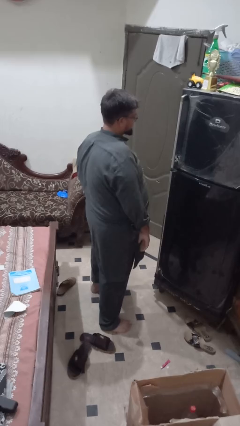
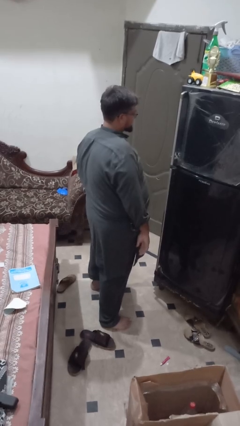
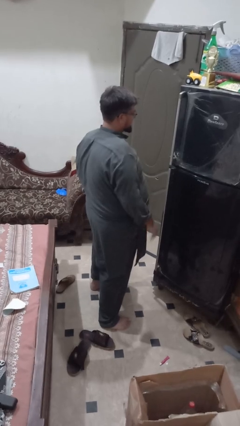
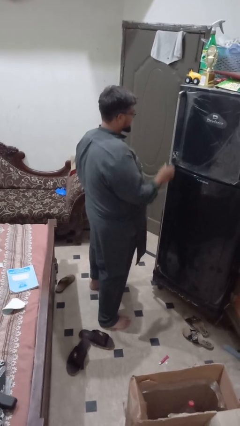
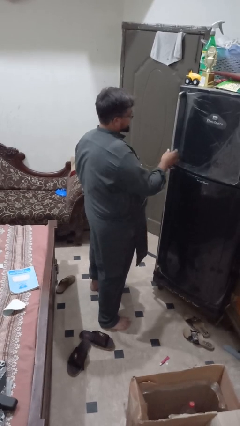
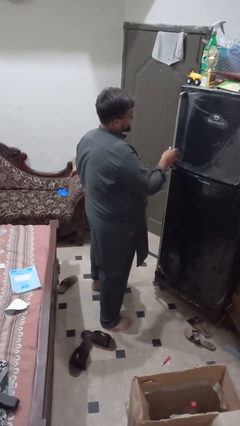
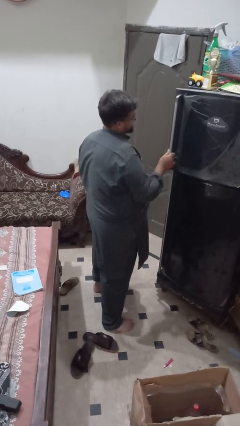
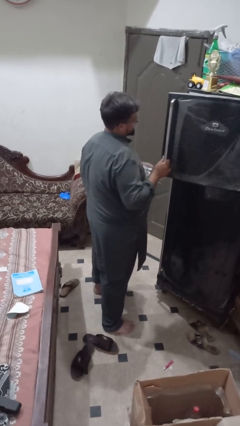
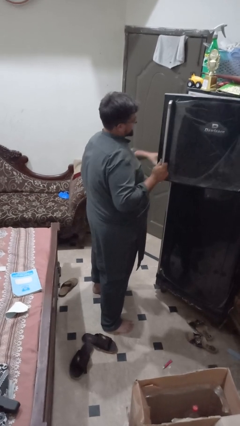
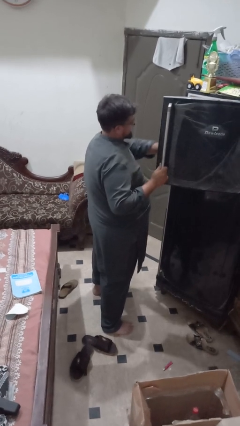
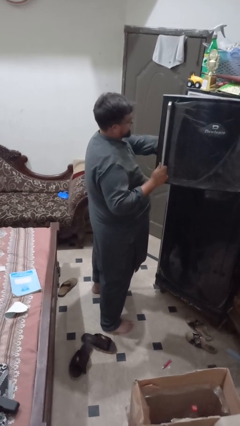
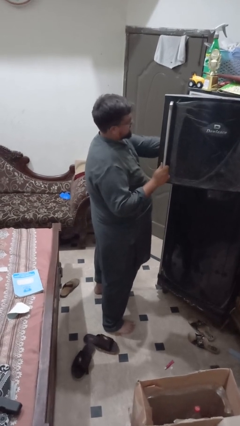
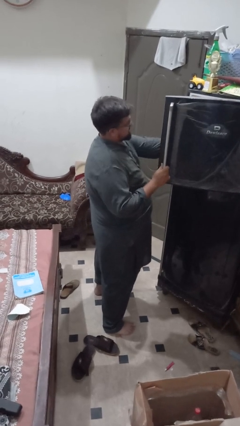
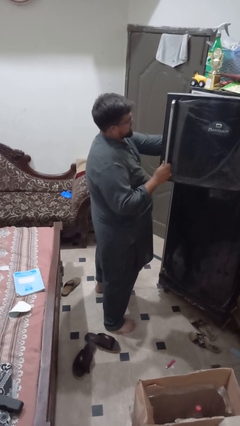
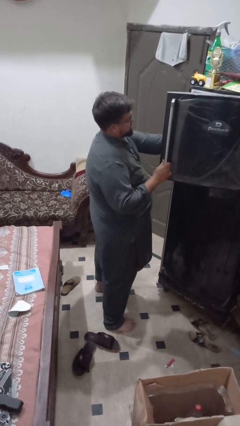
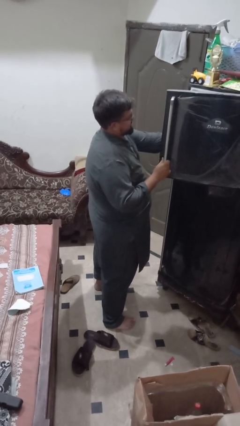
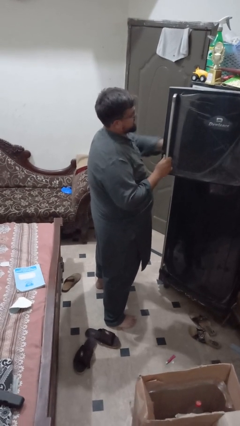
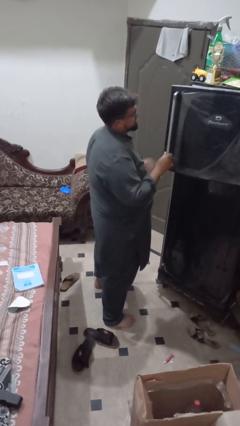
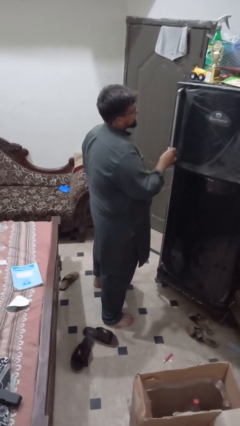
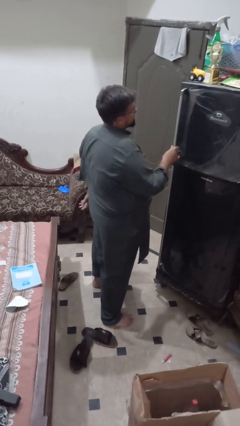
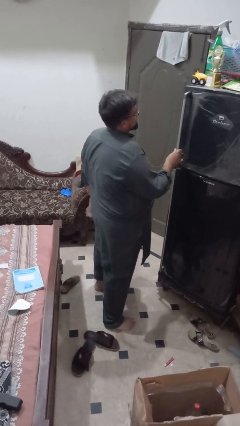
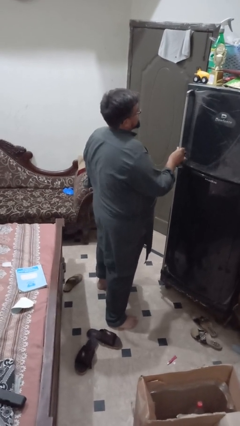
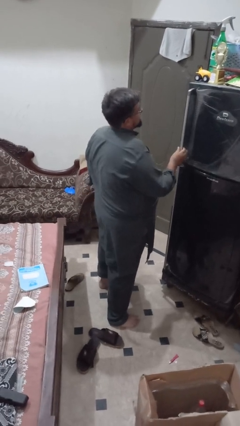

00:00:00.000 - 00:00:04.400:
person puts object into refrigerator

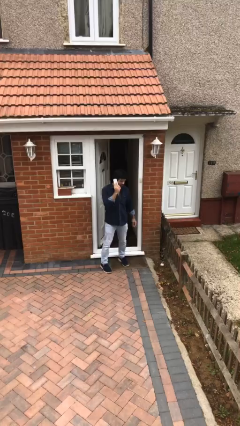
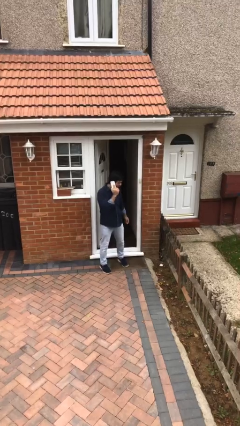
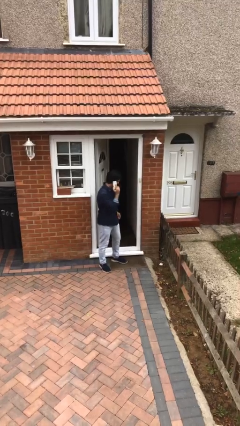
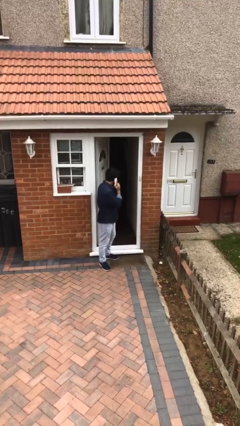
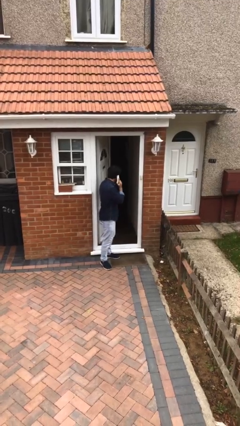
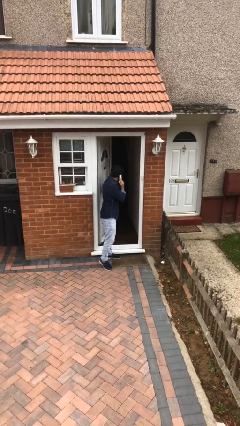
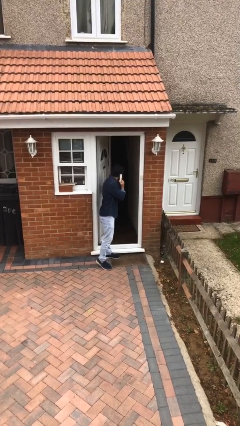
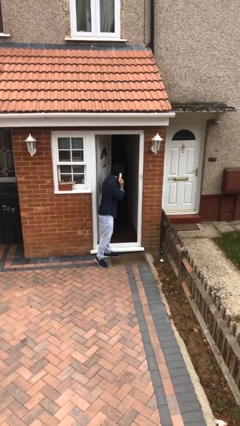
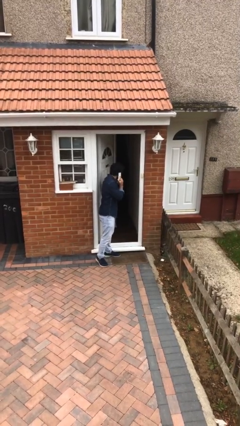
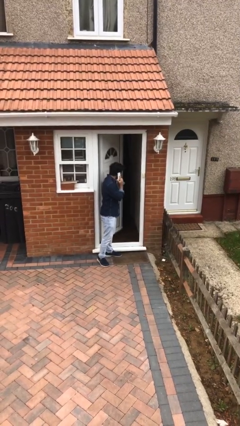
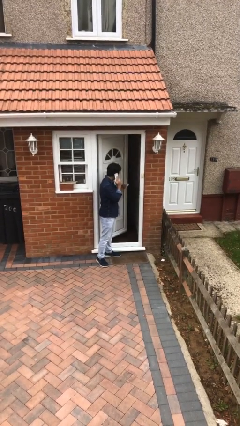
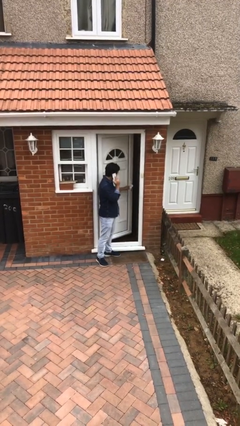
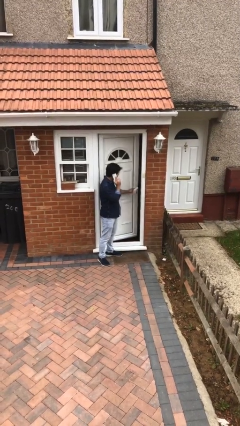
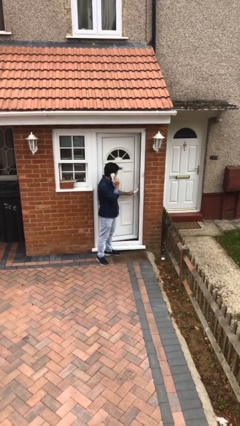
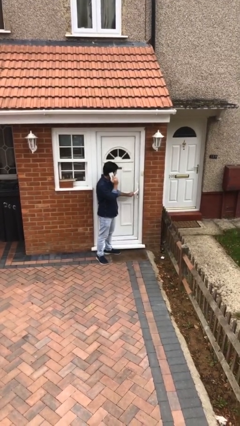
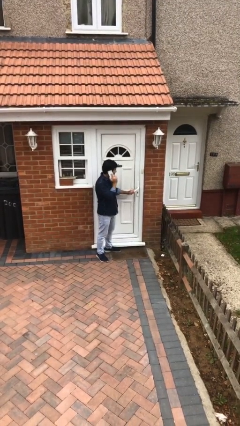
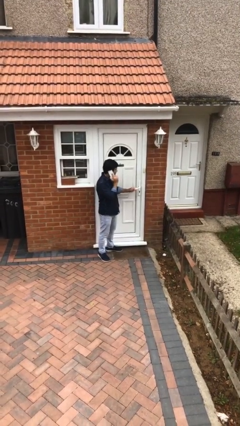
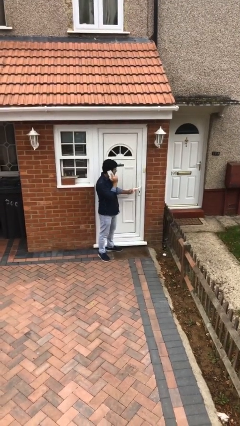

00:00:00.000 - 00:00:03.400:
person closes facility door

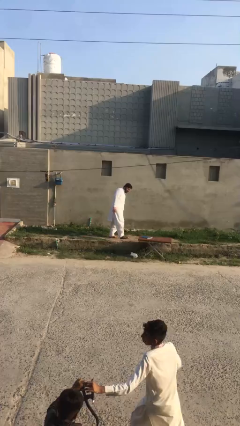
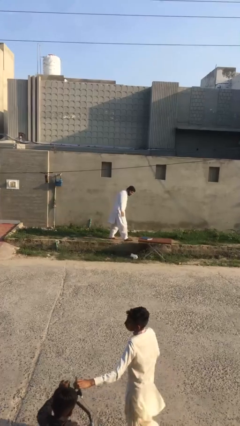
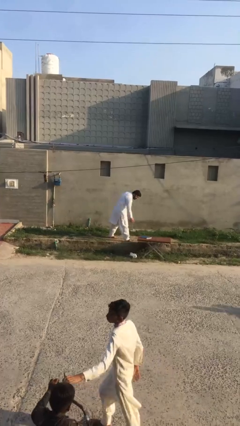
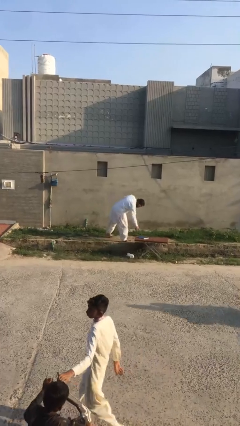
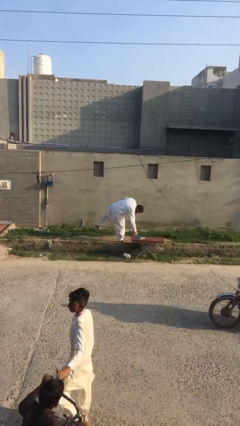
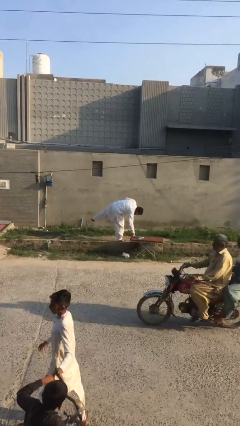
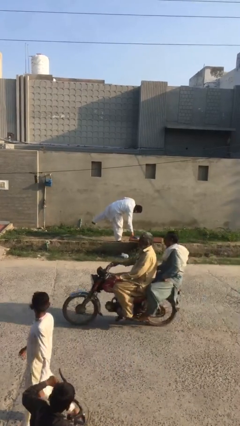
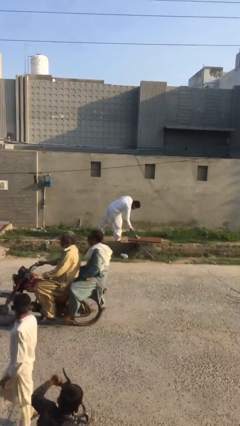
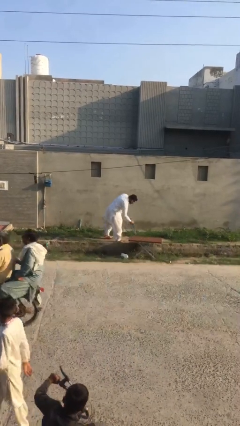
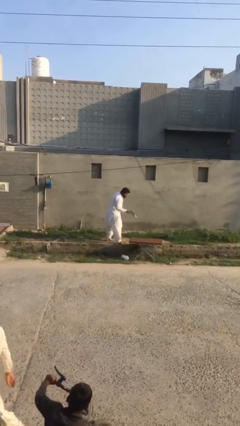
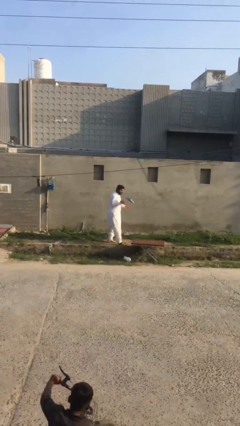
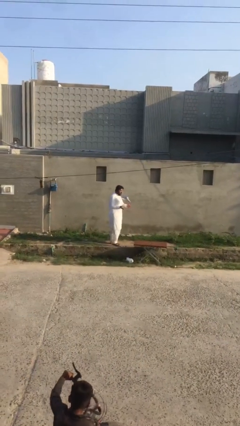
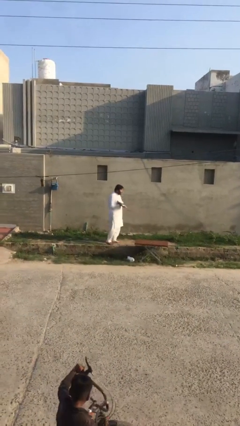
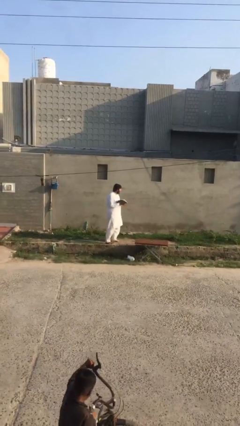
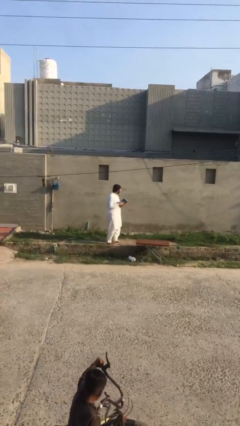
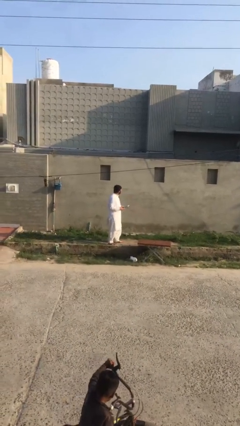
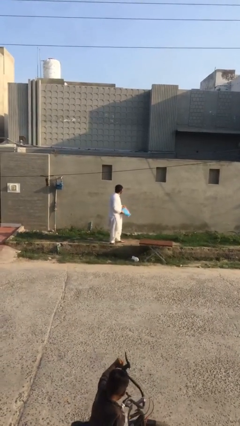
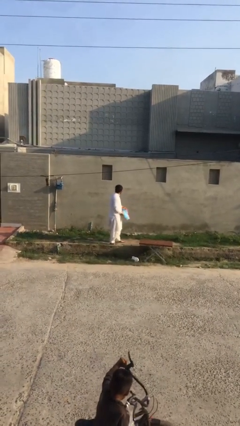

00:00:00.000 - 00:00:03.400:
person picks up object from table

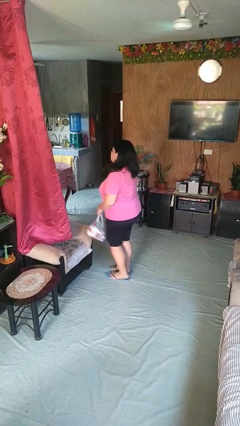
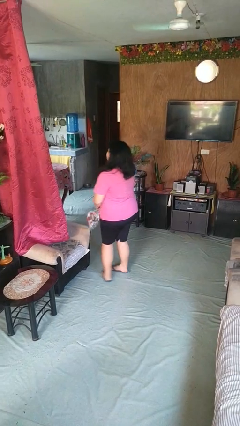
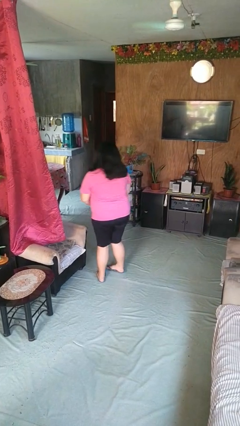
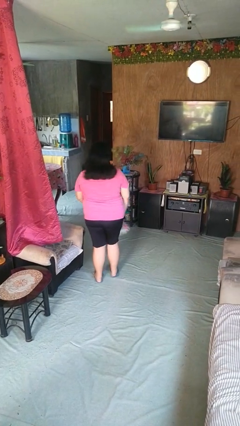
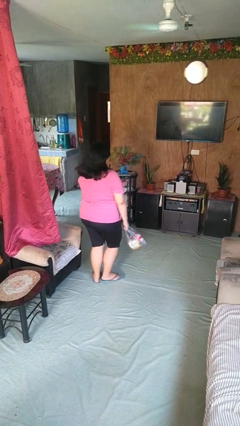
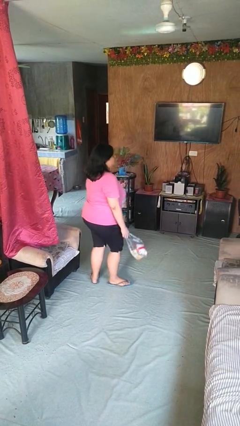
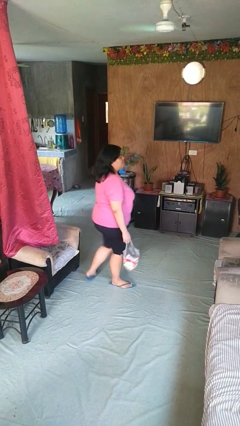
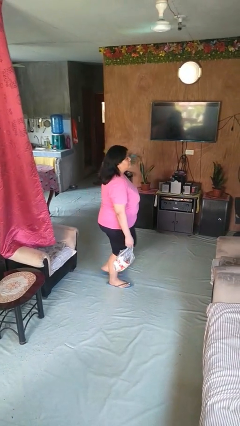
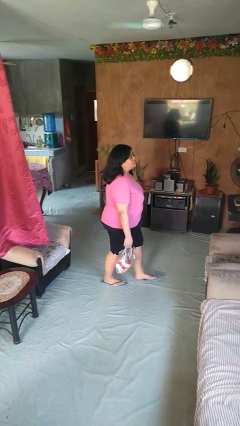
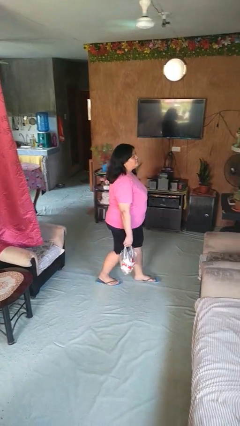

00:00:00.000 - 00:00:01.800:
person carries groceries

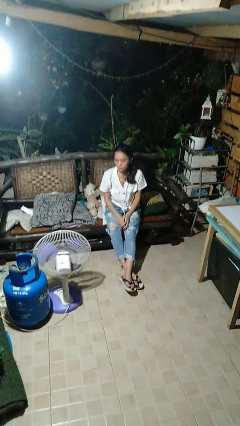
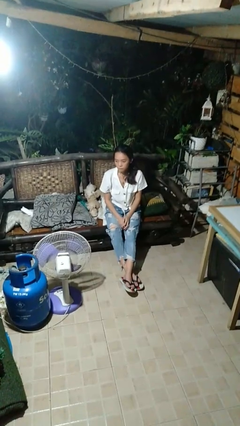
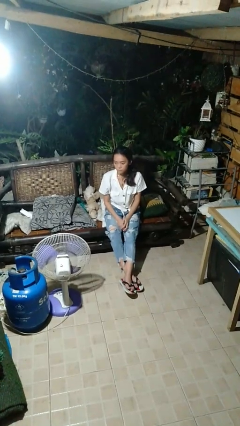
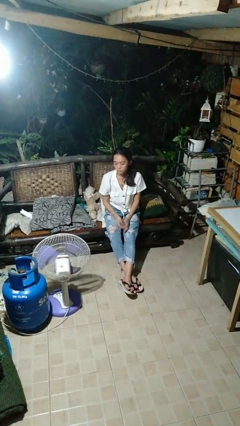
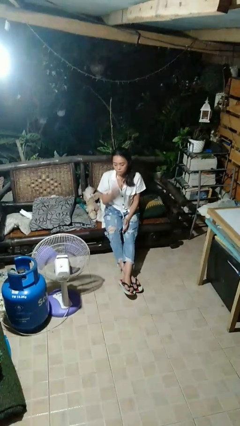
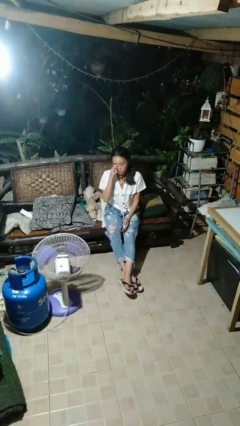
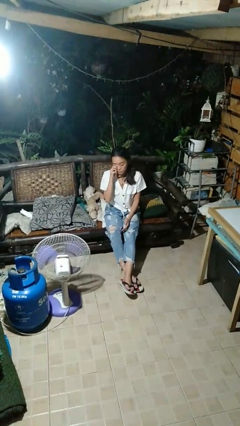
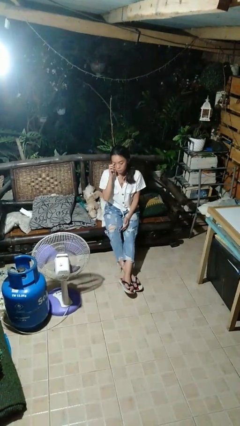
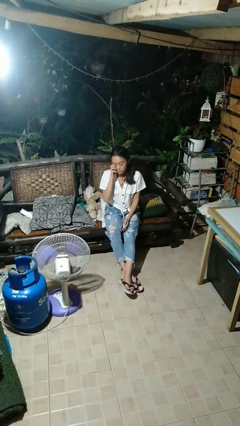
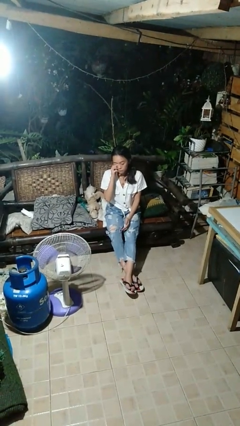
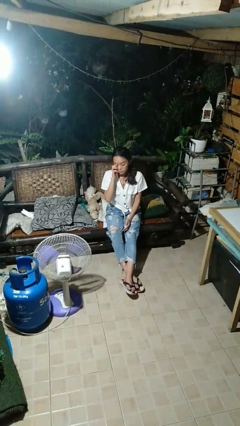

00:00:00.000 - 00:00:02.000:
person rubs eyes

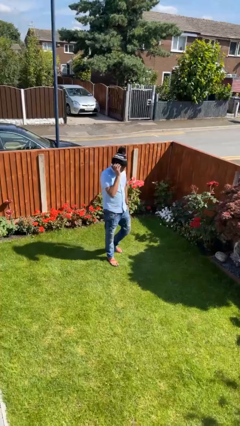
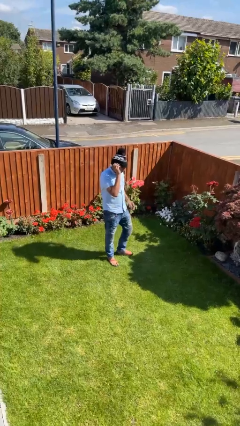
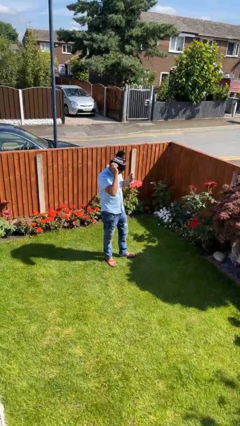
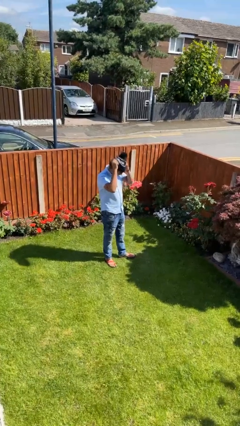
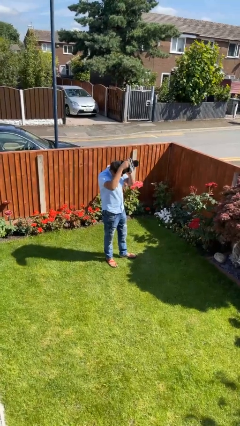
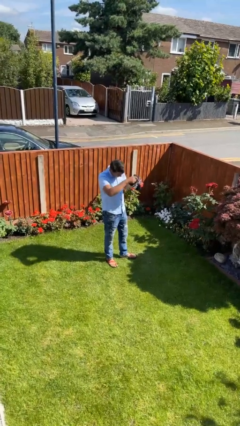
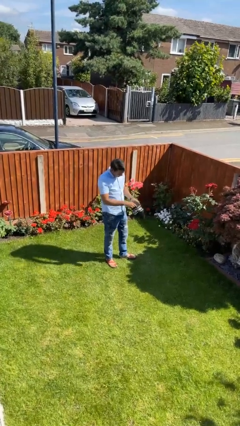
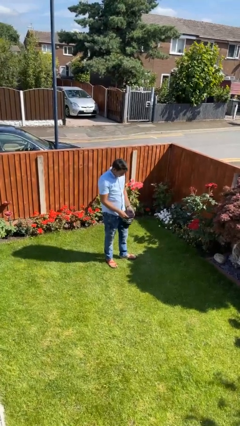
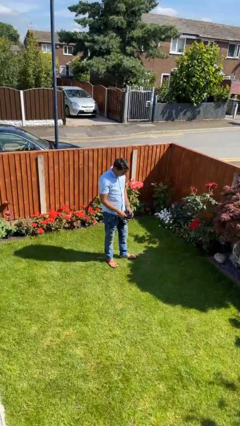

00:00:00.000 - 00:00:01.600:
person takes off hat

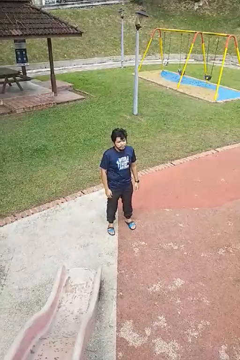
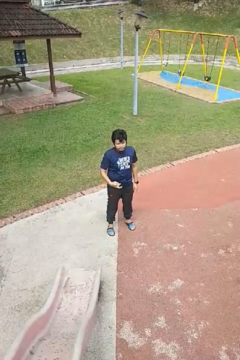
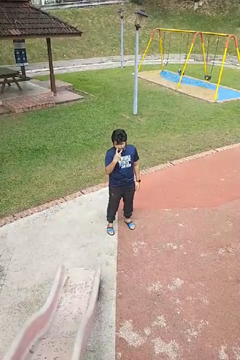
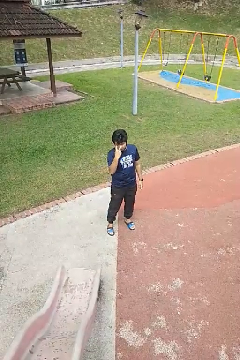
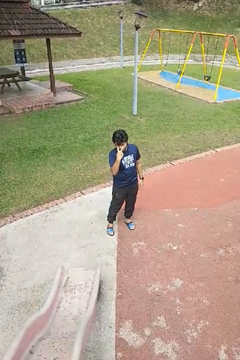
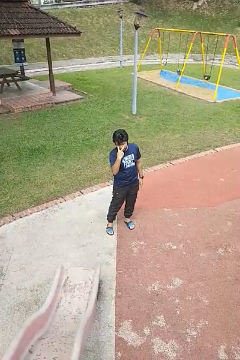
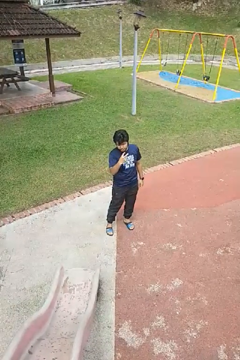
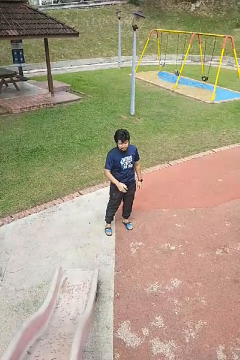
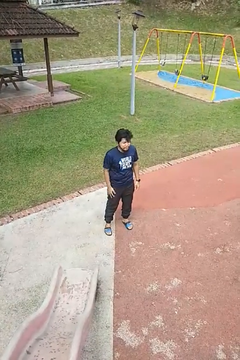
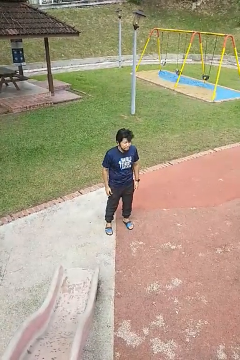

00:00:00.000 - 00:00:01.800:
person gestures watch closely
